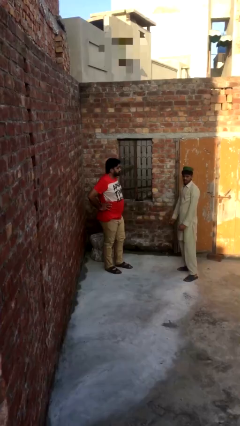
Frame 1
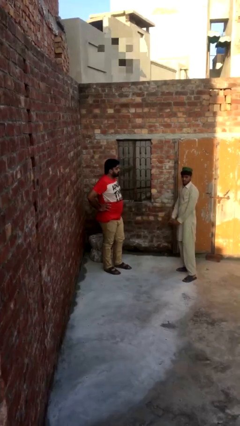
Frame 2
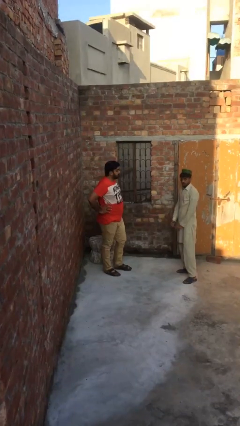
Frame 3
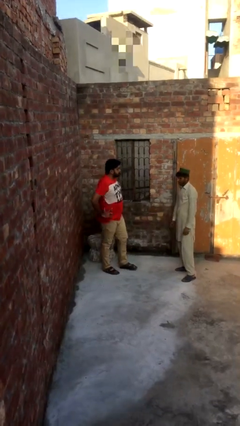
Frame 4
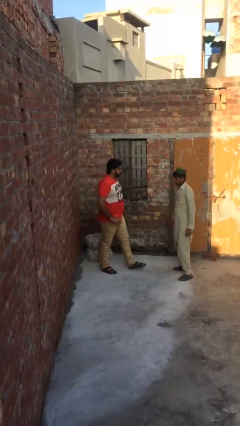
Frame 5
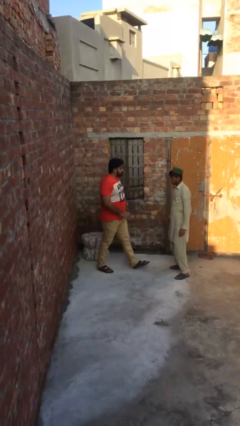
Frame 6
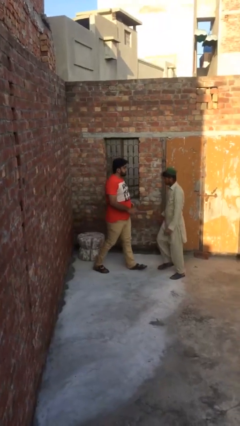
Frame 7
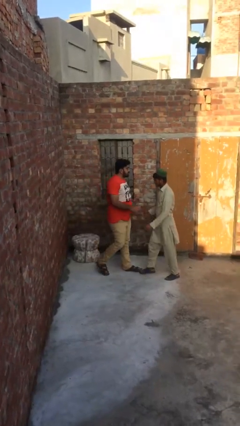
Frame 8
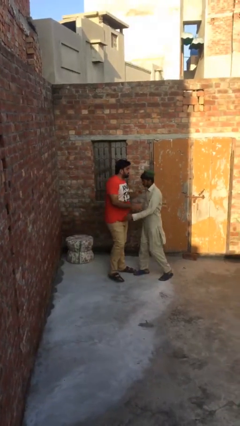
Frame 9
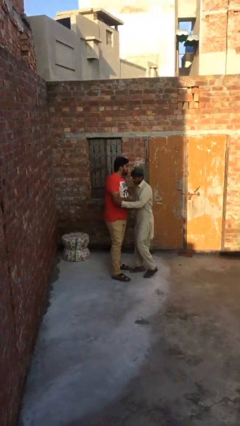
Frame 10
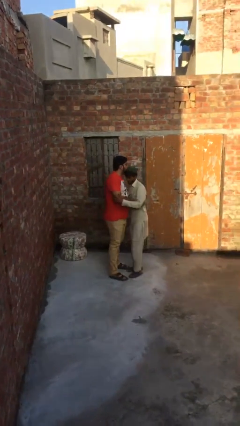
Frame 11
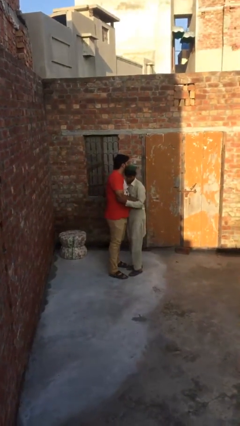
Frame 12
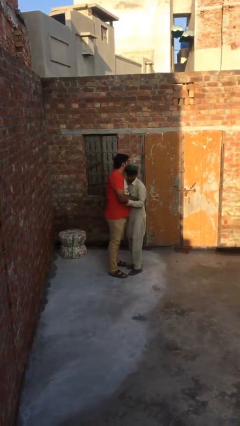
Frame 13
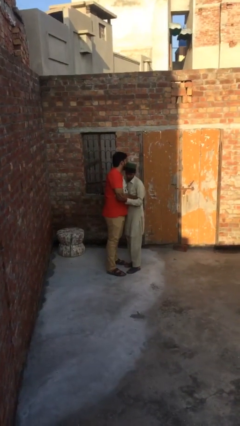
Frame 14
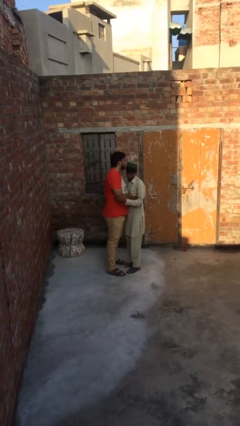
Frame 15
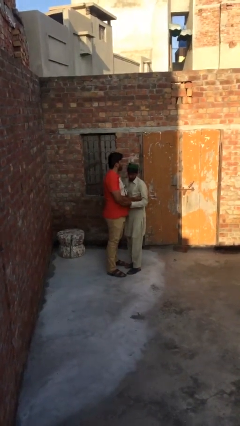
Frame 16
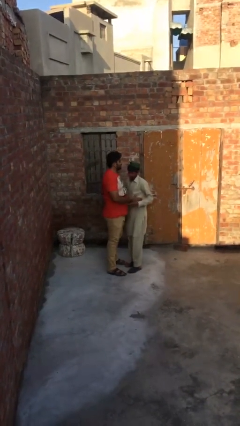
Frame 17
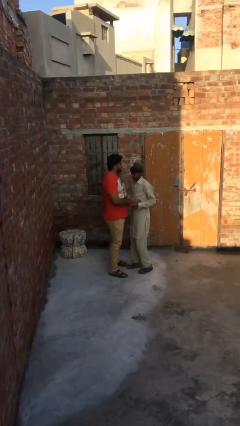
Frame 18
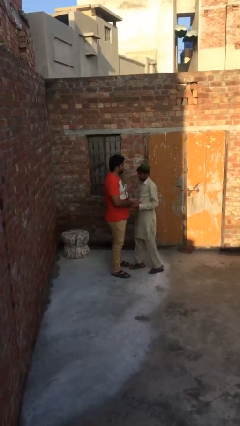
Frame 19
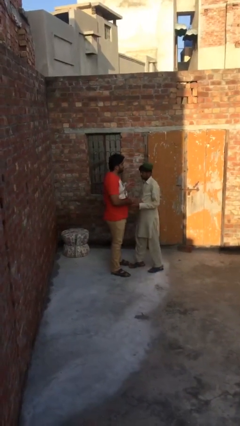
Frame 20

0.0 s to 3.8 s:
person embraces person

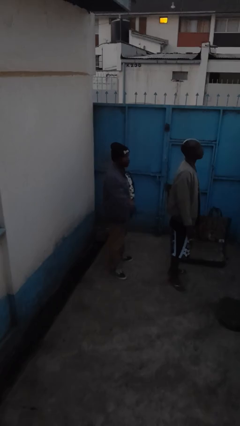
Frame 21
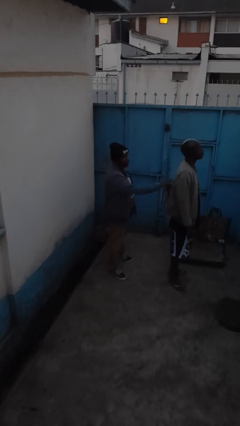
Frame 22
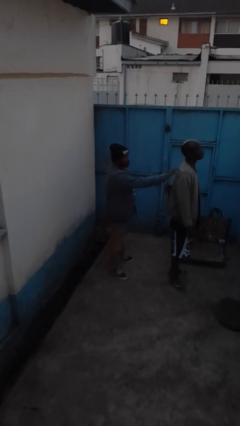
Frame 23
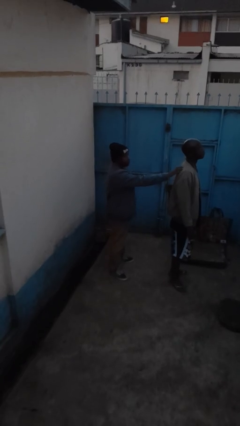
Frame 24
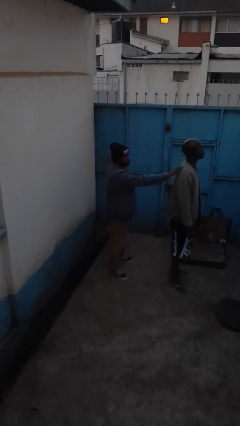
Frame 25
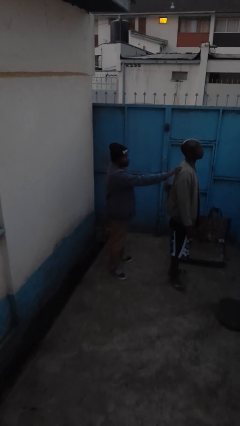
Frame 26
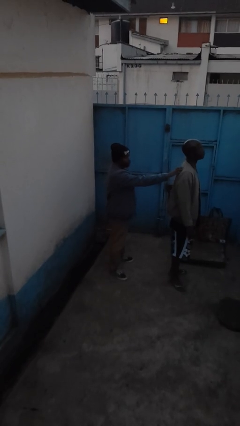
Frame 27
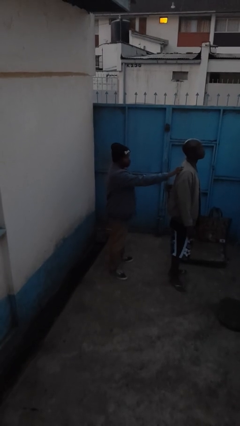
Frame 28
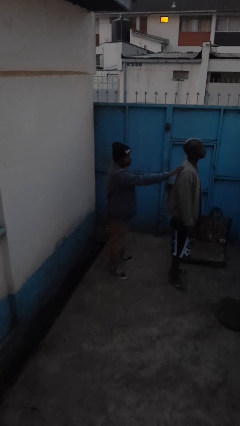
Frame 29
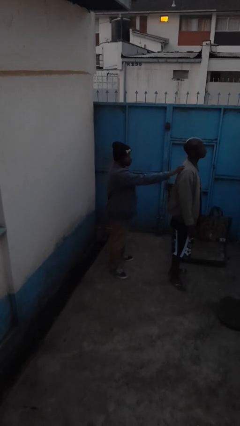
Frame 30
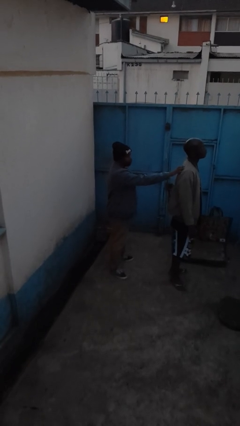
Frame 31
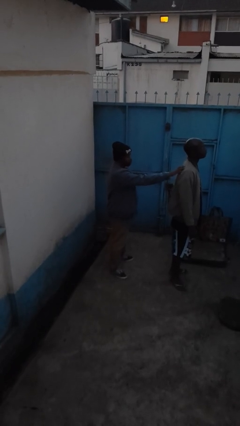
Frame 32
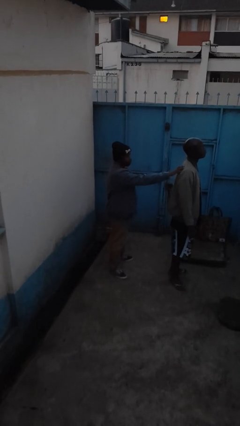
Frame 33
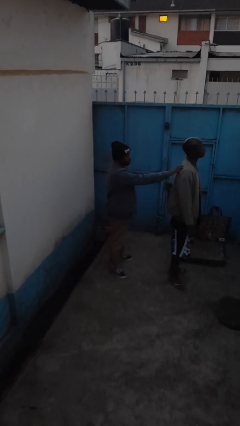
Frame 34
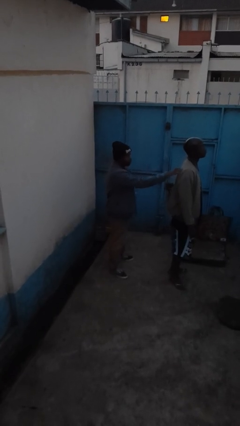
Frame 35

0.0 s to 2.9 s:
person touches back of person

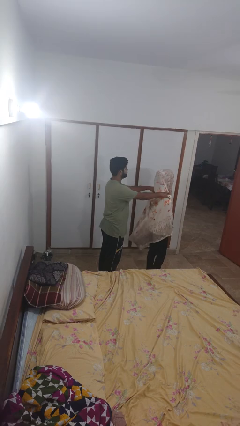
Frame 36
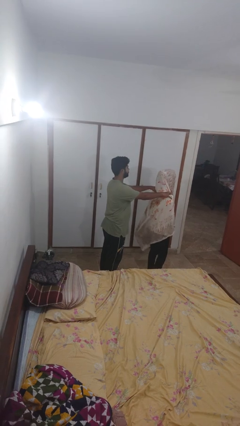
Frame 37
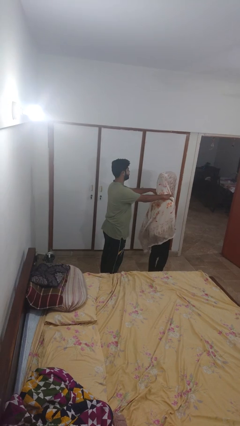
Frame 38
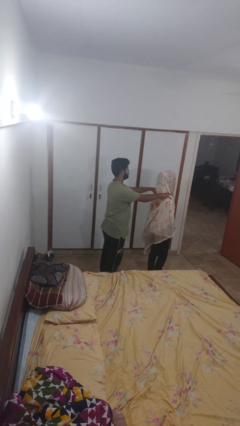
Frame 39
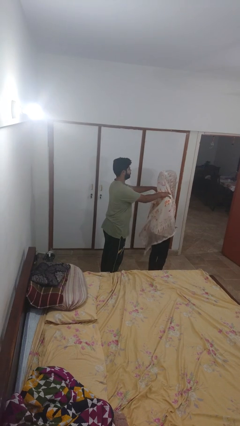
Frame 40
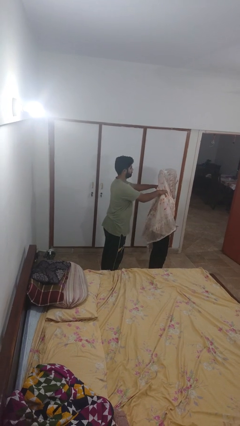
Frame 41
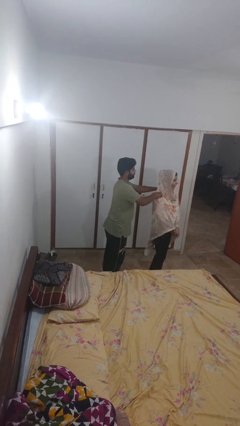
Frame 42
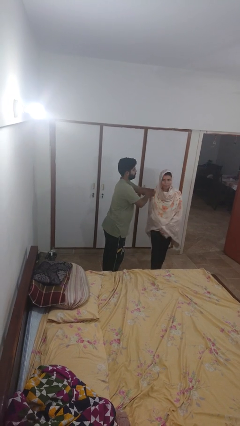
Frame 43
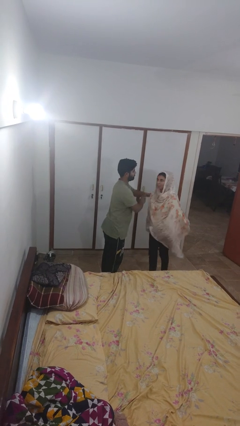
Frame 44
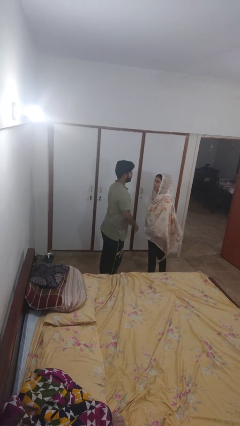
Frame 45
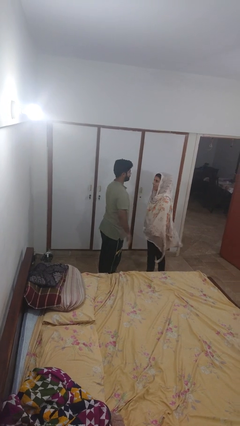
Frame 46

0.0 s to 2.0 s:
person spins person around

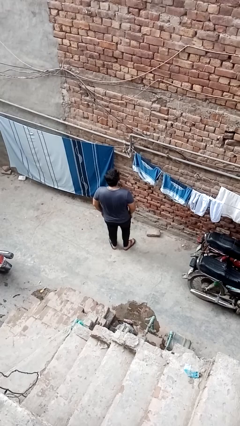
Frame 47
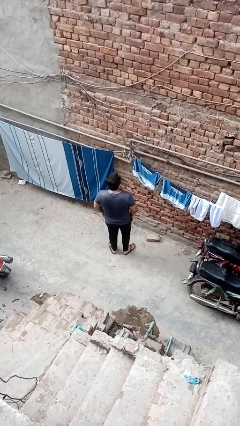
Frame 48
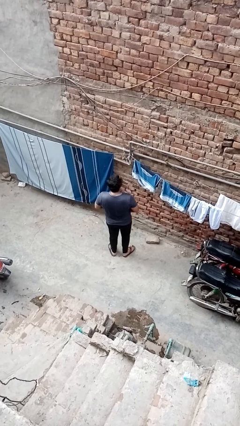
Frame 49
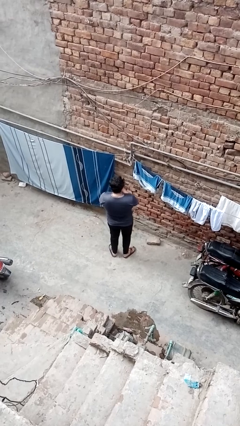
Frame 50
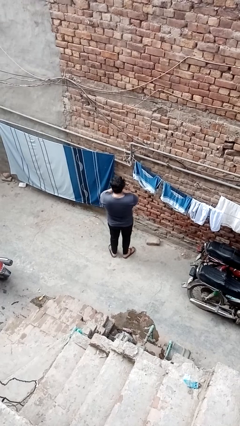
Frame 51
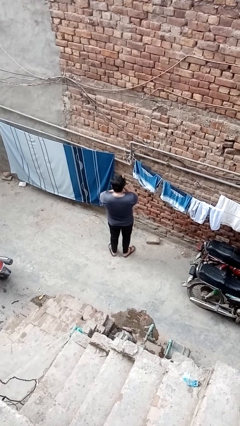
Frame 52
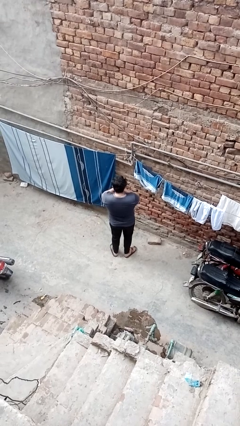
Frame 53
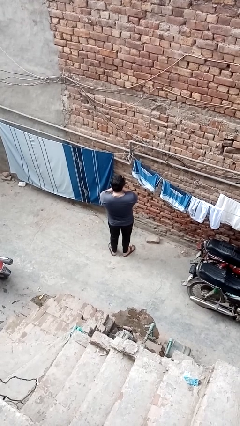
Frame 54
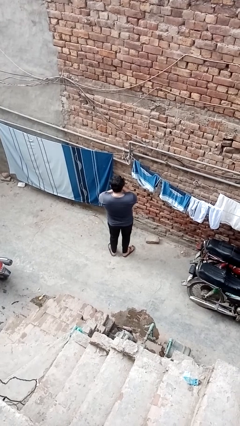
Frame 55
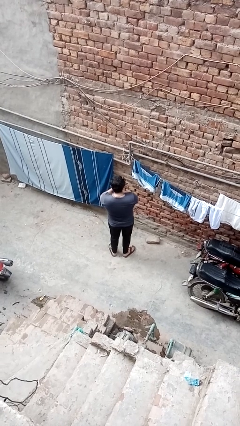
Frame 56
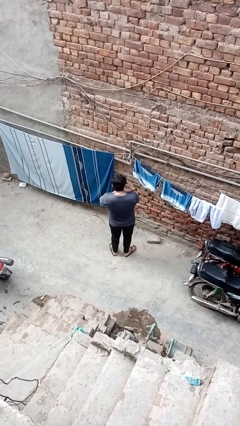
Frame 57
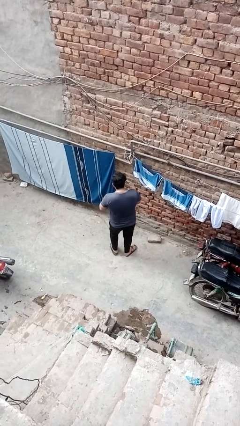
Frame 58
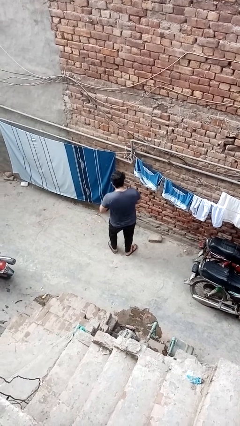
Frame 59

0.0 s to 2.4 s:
person blows into hands

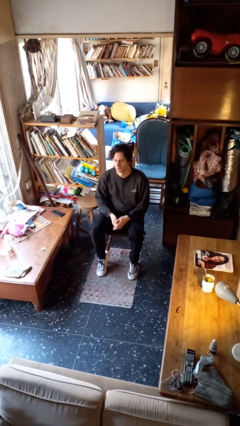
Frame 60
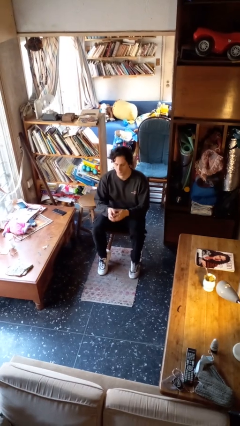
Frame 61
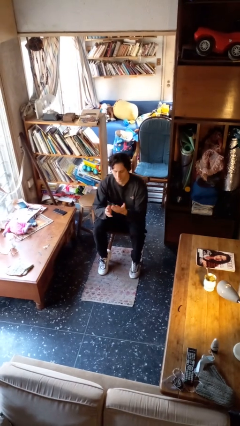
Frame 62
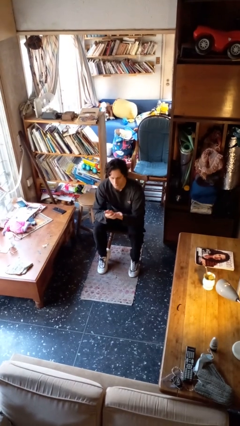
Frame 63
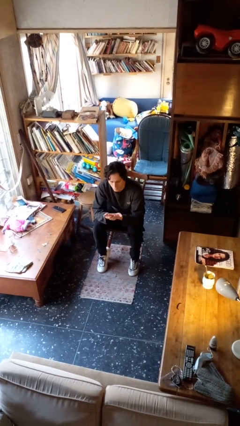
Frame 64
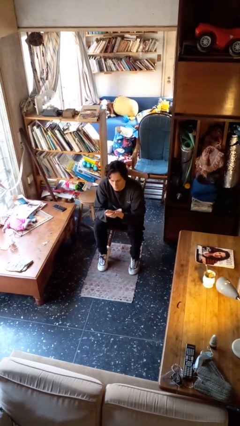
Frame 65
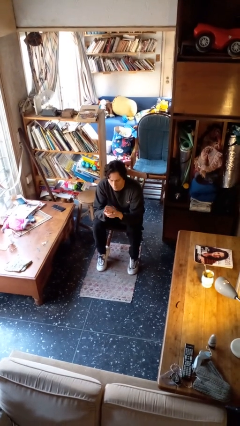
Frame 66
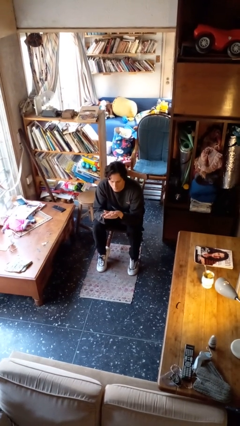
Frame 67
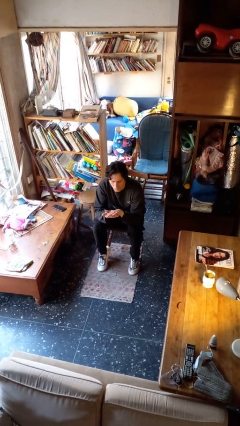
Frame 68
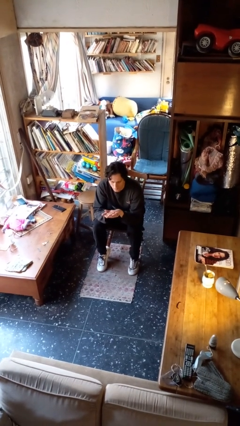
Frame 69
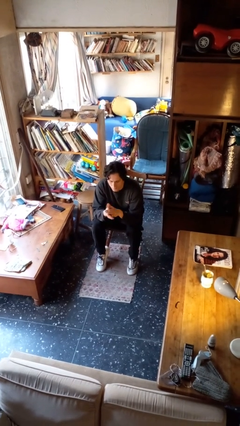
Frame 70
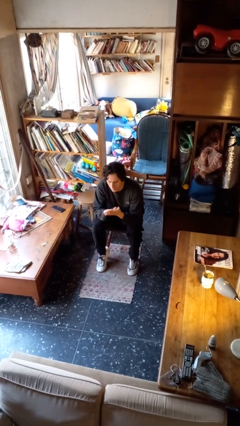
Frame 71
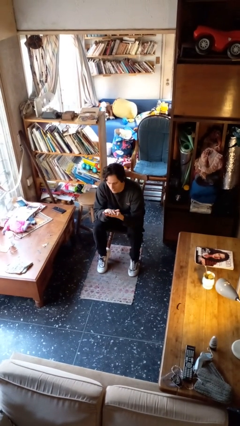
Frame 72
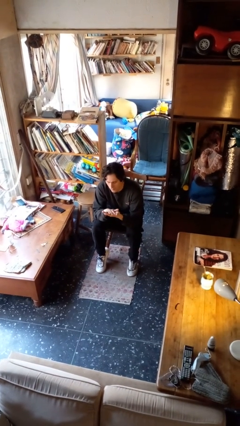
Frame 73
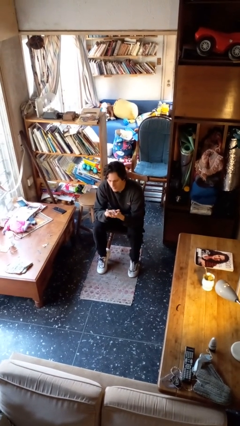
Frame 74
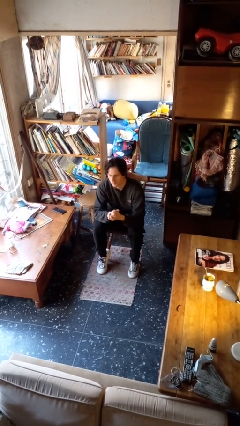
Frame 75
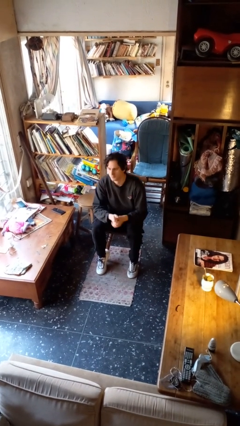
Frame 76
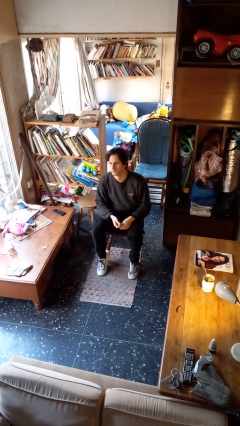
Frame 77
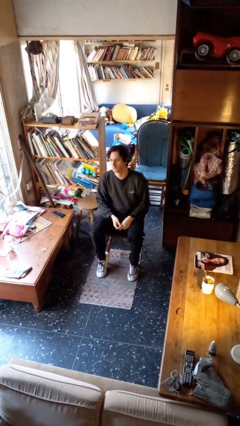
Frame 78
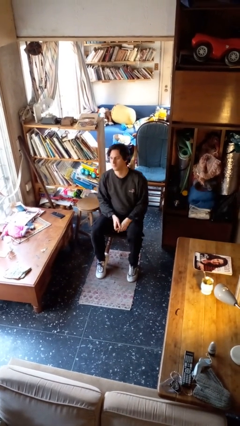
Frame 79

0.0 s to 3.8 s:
person looks at hands in lap

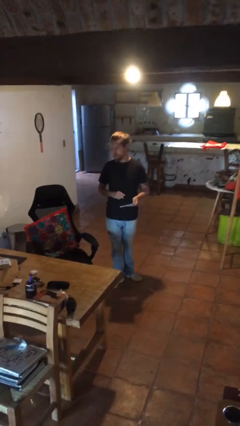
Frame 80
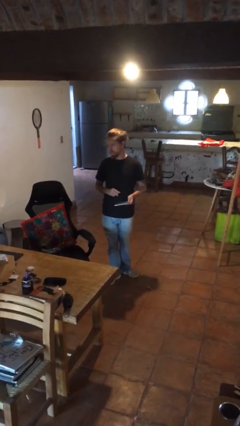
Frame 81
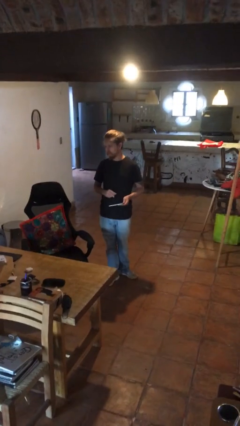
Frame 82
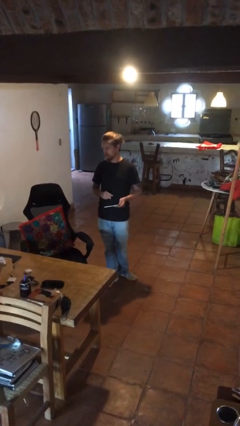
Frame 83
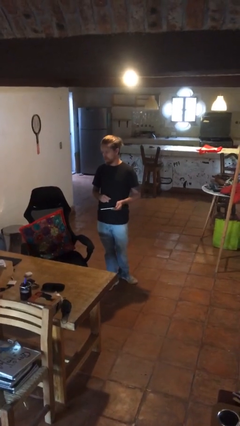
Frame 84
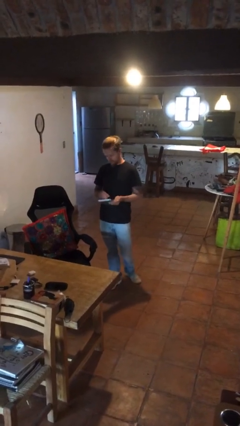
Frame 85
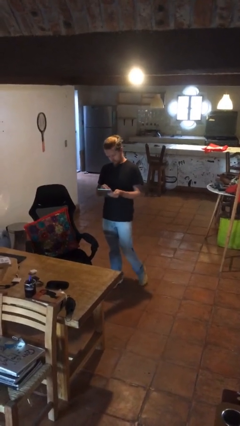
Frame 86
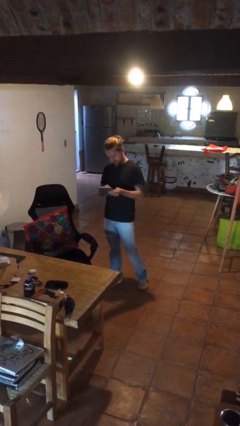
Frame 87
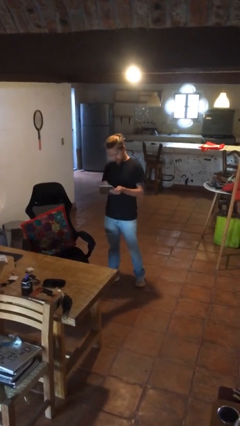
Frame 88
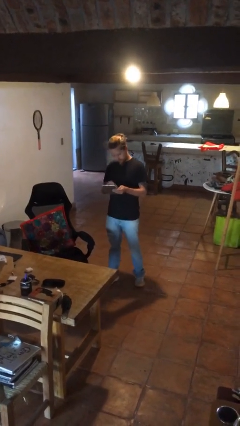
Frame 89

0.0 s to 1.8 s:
person interacts with tablet

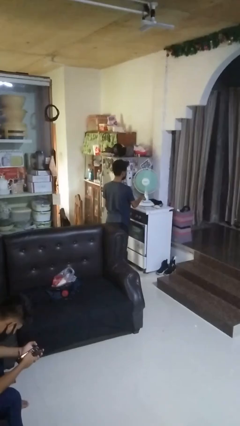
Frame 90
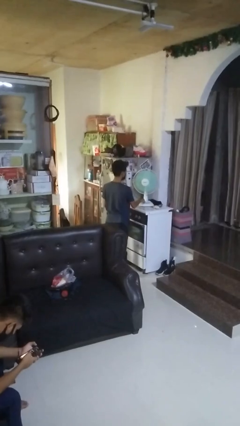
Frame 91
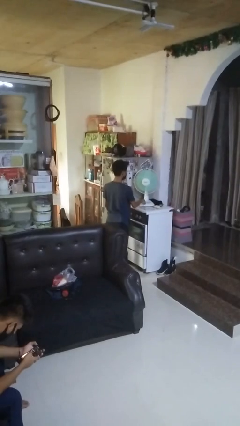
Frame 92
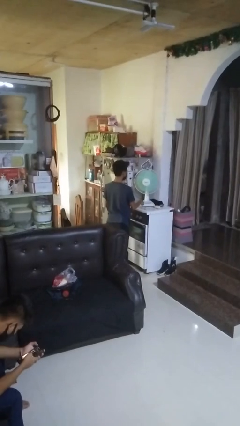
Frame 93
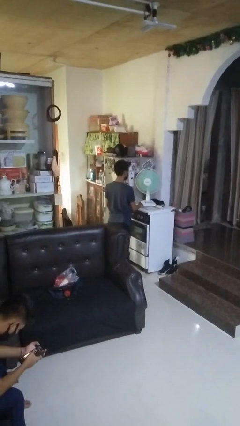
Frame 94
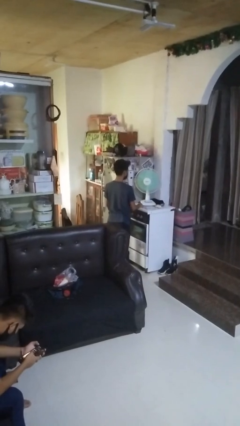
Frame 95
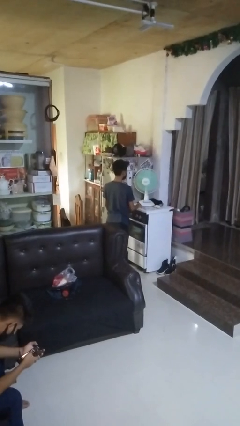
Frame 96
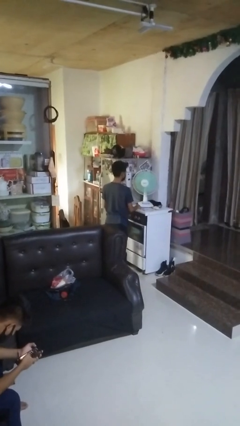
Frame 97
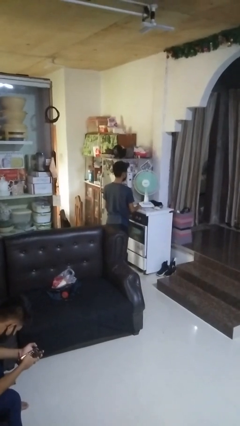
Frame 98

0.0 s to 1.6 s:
person turns off fan
